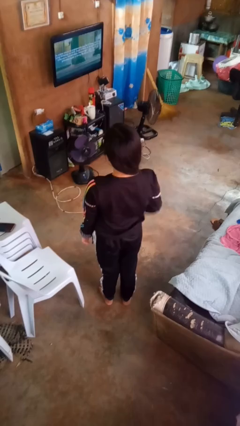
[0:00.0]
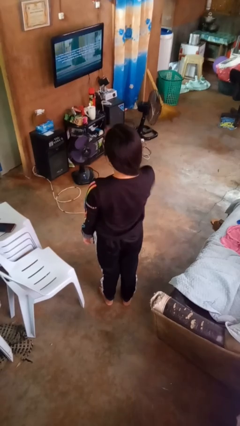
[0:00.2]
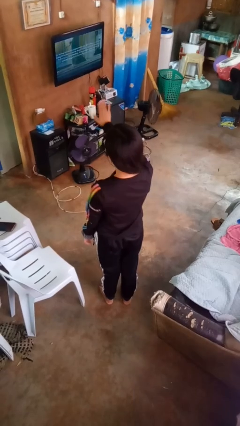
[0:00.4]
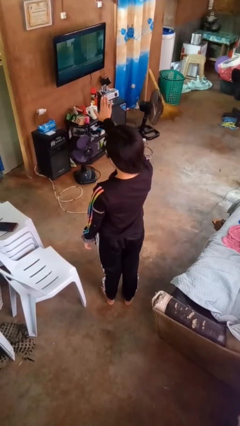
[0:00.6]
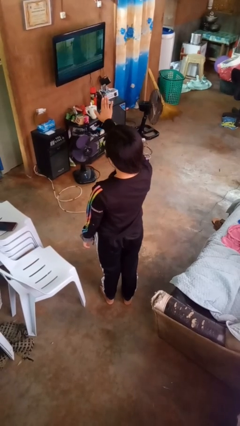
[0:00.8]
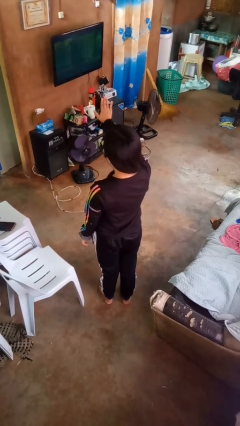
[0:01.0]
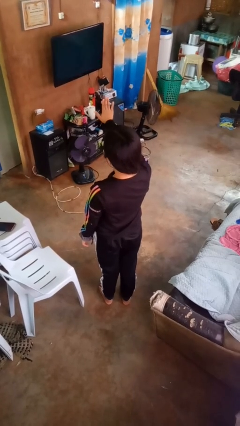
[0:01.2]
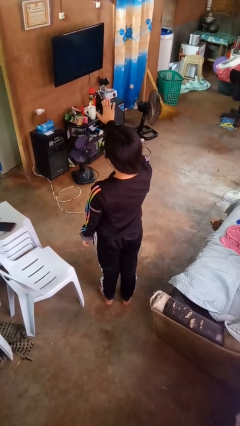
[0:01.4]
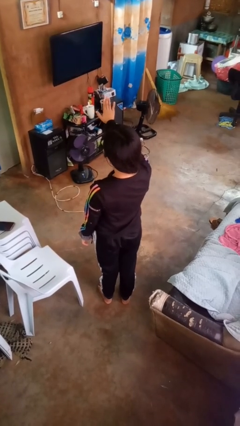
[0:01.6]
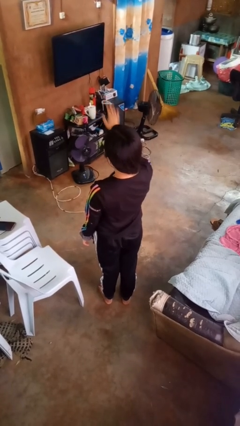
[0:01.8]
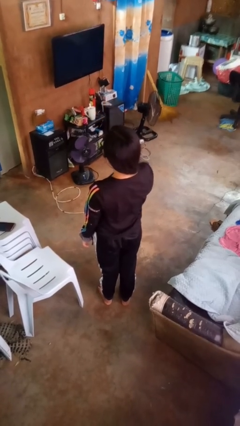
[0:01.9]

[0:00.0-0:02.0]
person gestures stop

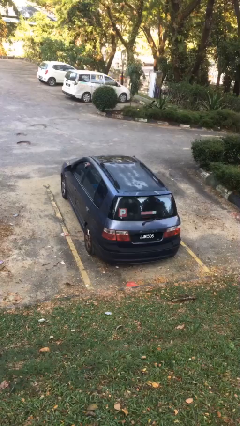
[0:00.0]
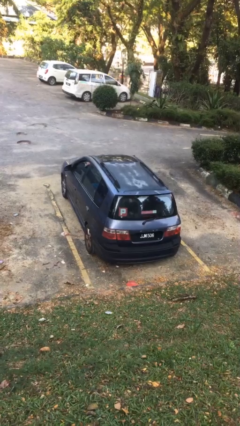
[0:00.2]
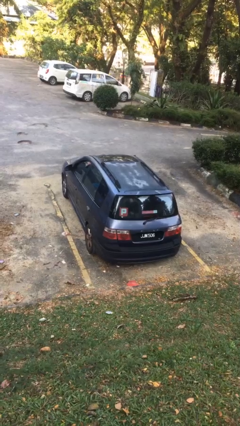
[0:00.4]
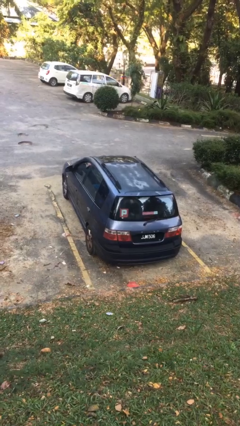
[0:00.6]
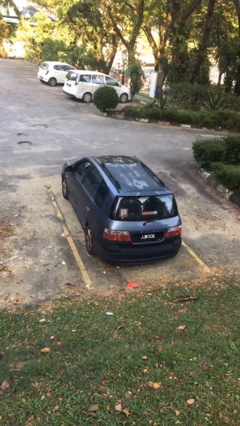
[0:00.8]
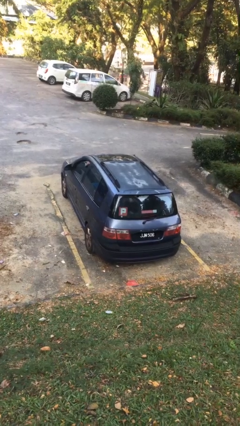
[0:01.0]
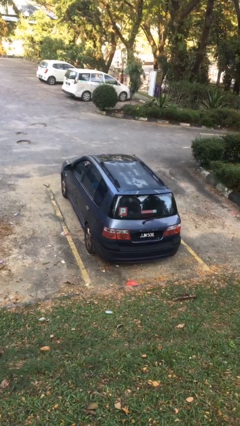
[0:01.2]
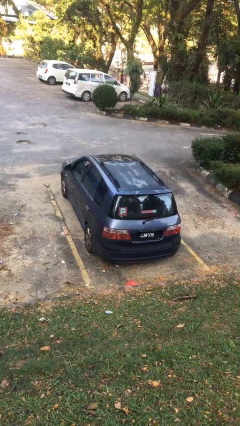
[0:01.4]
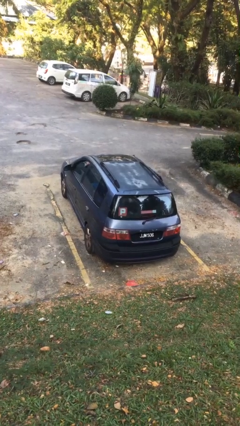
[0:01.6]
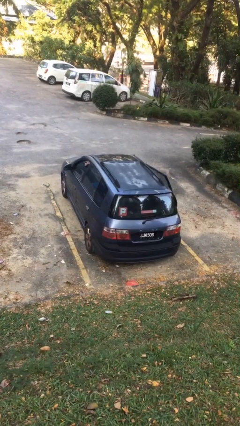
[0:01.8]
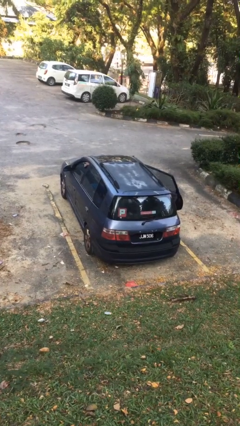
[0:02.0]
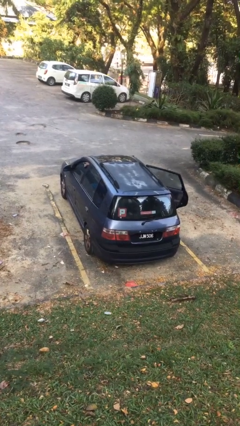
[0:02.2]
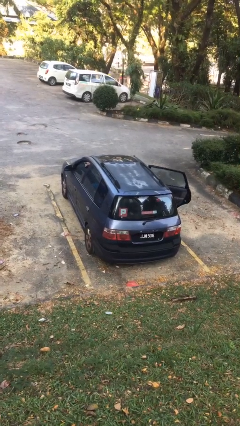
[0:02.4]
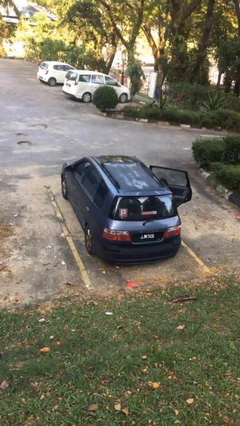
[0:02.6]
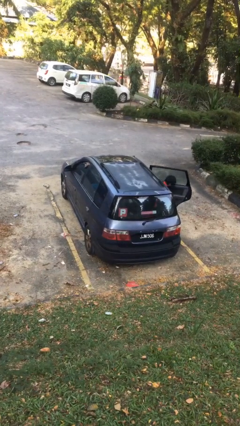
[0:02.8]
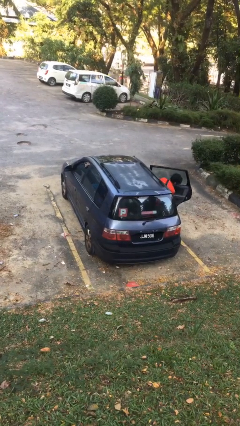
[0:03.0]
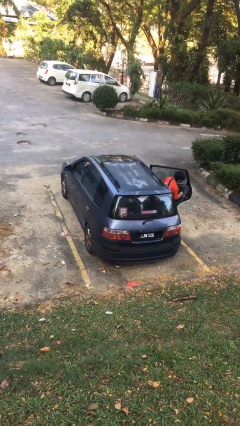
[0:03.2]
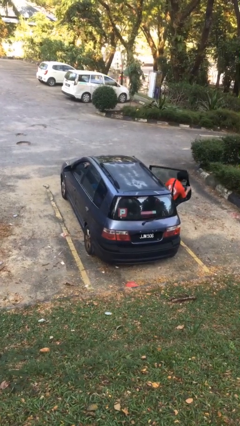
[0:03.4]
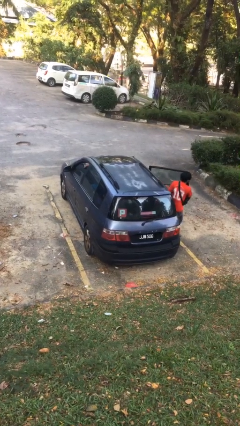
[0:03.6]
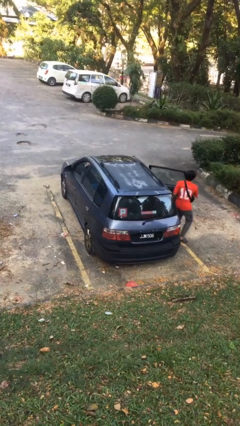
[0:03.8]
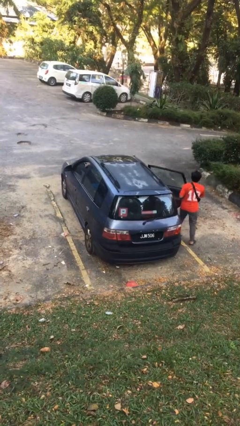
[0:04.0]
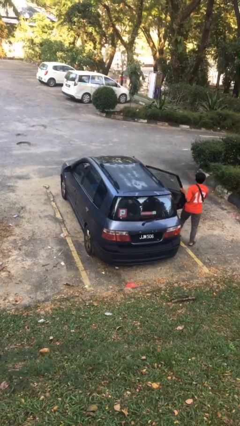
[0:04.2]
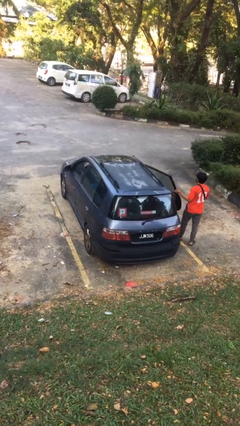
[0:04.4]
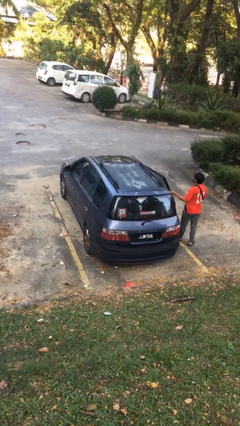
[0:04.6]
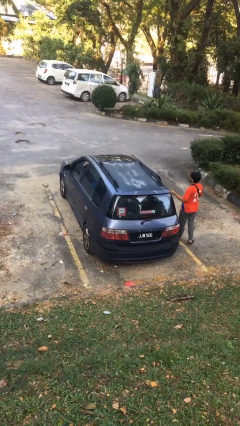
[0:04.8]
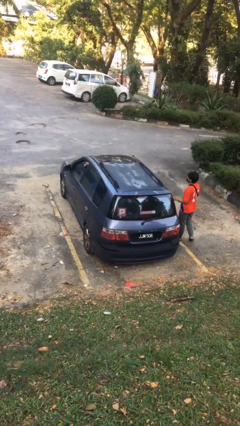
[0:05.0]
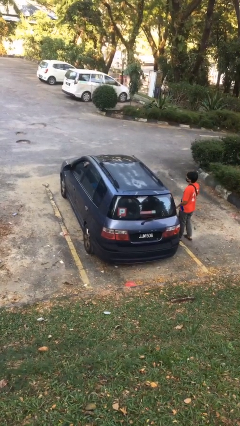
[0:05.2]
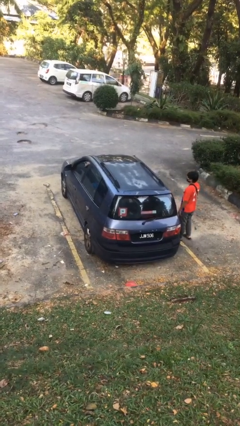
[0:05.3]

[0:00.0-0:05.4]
car drops off person

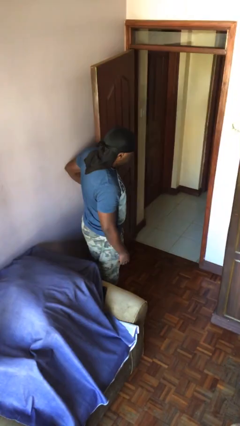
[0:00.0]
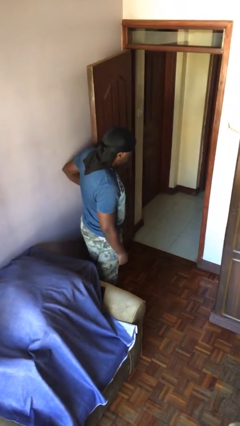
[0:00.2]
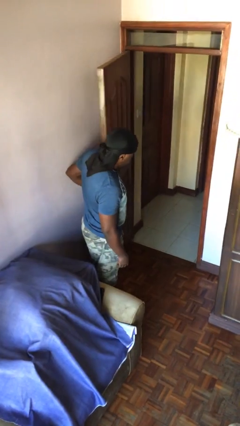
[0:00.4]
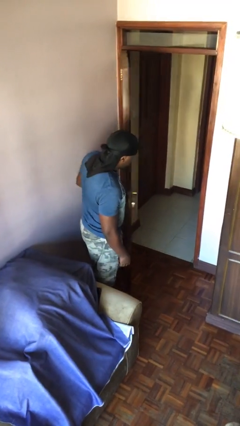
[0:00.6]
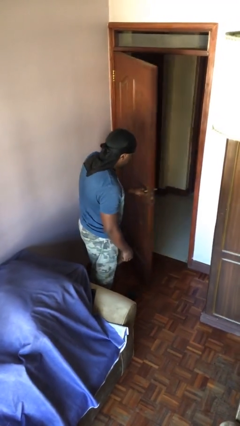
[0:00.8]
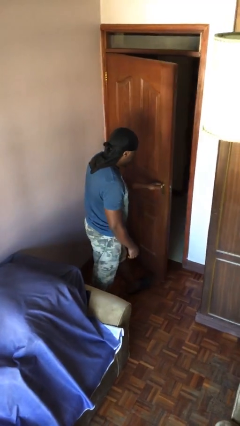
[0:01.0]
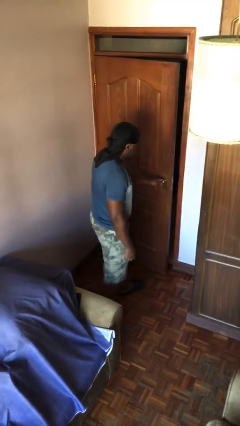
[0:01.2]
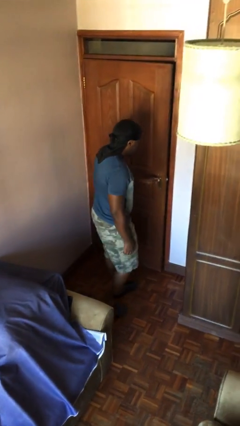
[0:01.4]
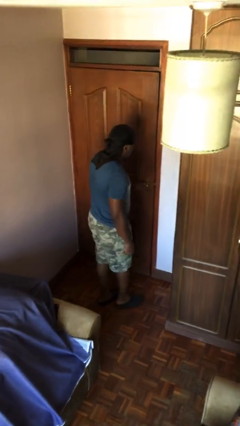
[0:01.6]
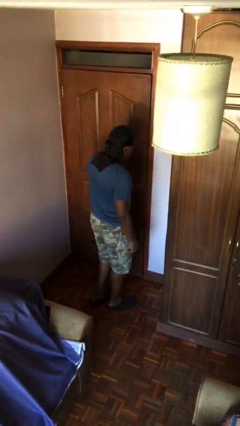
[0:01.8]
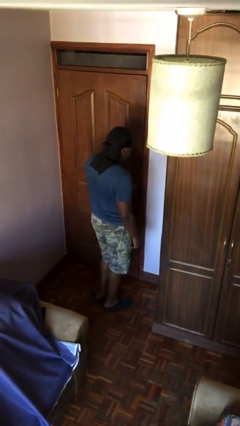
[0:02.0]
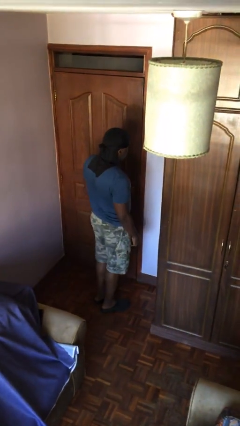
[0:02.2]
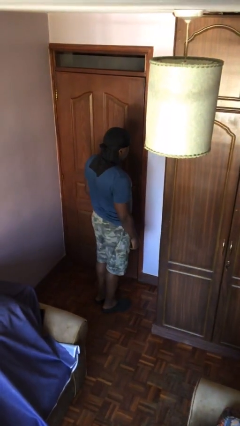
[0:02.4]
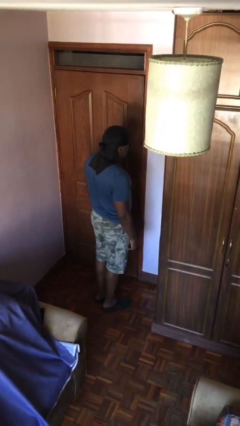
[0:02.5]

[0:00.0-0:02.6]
person closes facility door

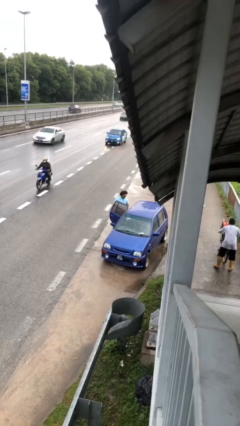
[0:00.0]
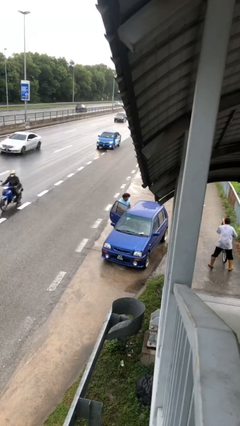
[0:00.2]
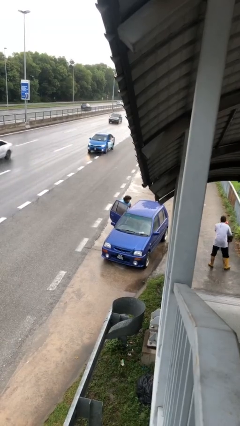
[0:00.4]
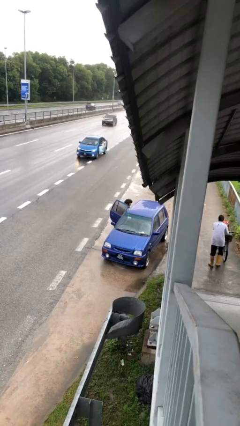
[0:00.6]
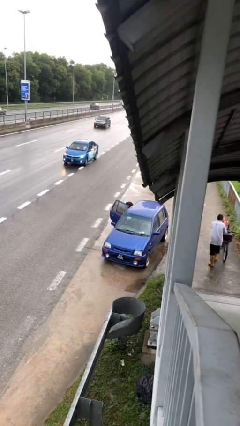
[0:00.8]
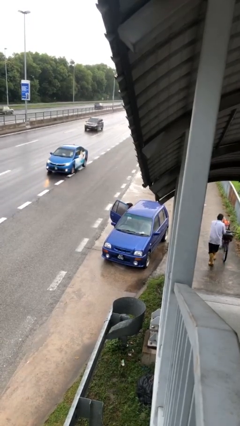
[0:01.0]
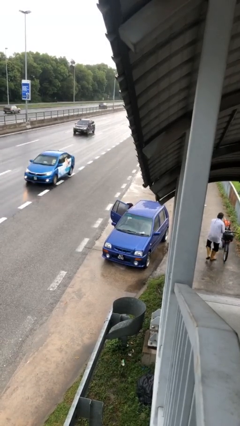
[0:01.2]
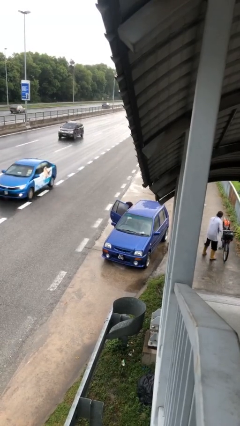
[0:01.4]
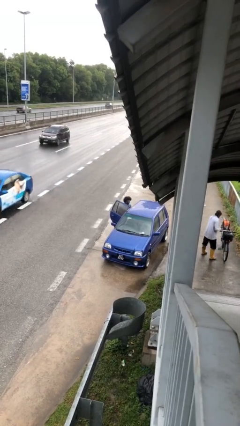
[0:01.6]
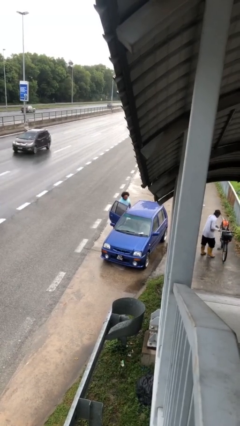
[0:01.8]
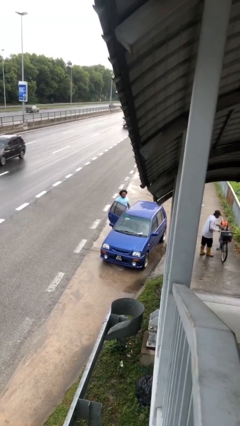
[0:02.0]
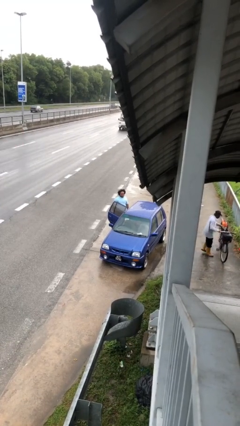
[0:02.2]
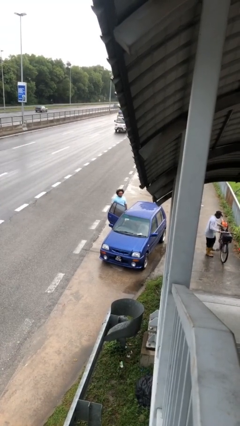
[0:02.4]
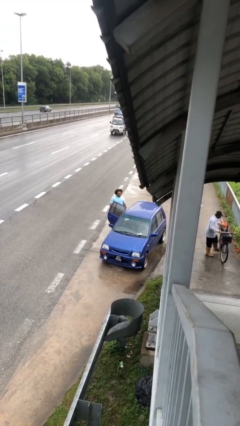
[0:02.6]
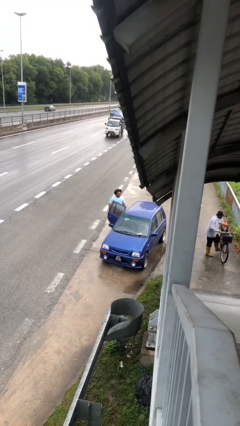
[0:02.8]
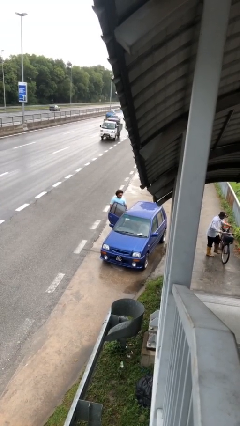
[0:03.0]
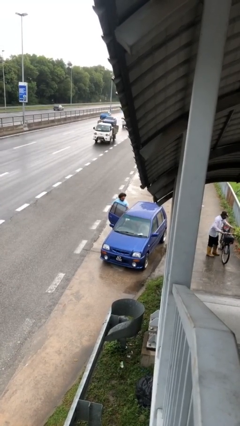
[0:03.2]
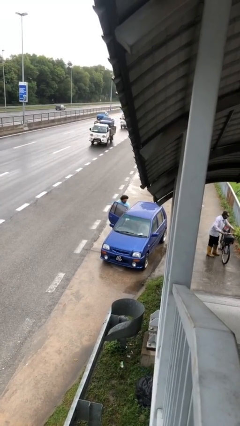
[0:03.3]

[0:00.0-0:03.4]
person loads car

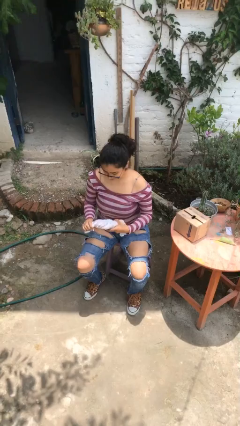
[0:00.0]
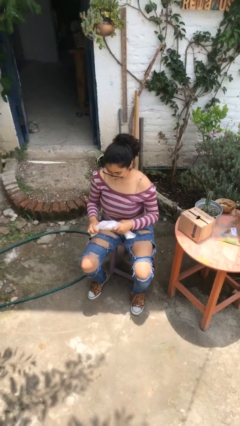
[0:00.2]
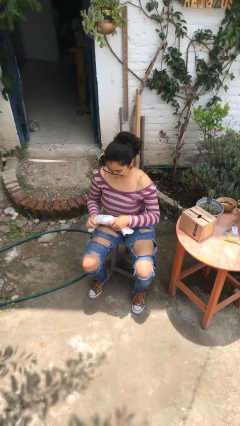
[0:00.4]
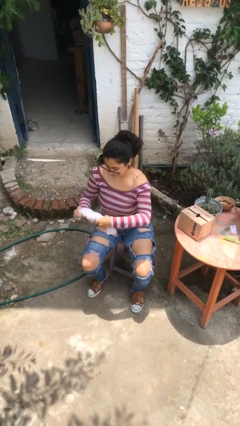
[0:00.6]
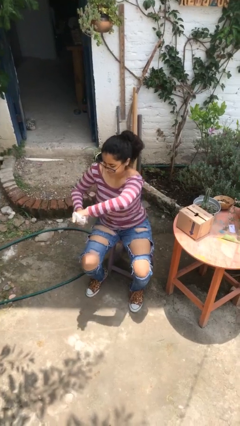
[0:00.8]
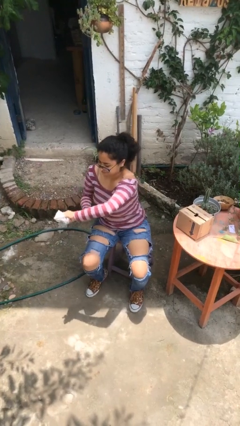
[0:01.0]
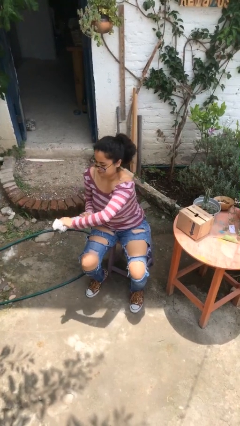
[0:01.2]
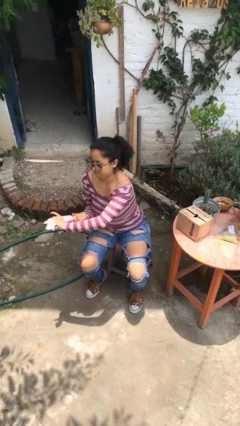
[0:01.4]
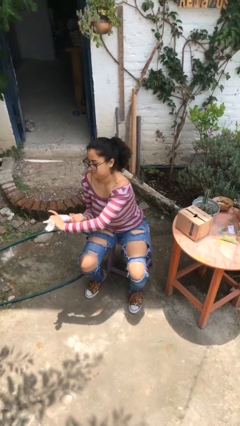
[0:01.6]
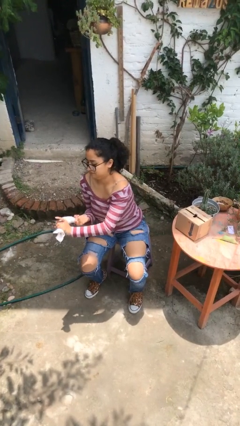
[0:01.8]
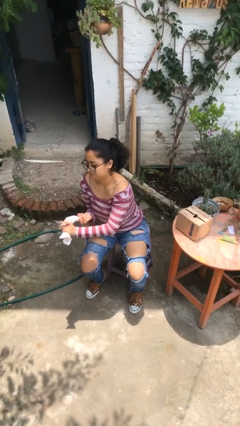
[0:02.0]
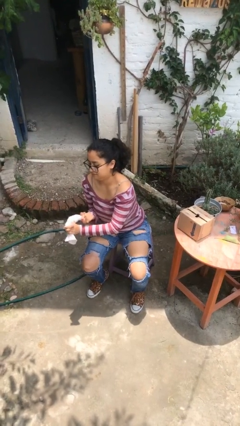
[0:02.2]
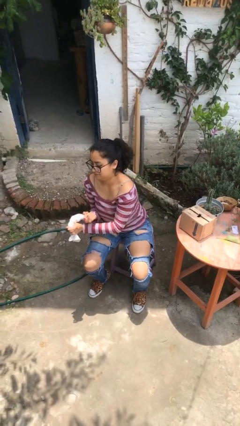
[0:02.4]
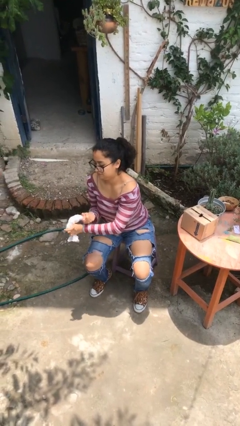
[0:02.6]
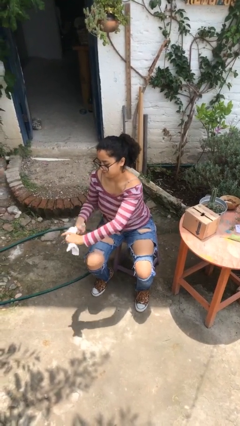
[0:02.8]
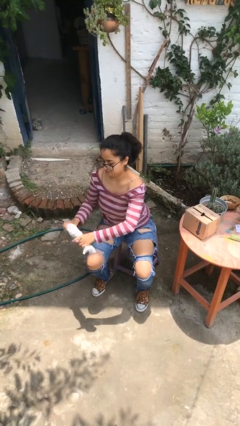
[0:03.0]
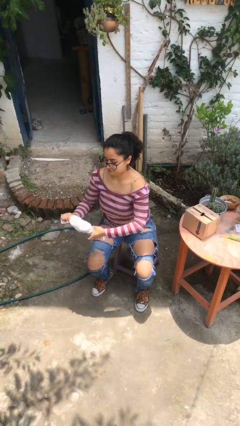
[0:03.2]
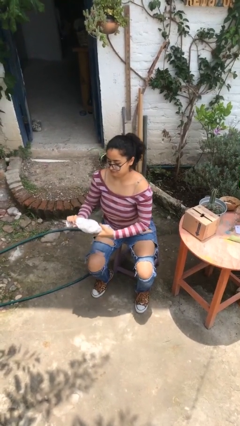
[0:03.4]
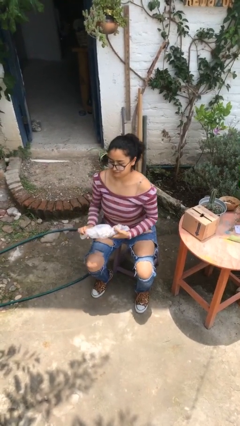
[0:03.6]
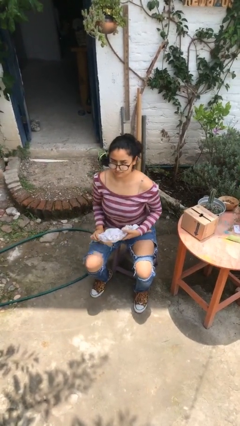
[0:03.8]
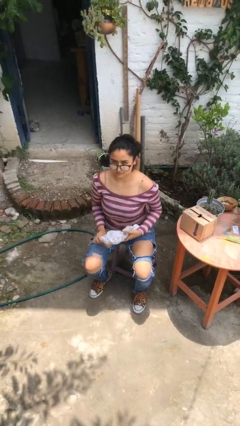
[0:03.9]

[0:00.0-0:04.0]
person squeezes object

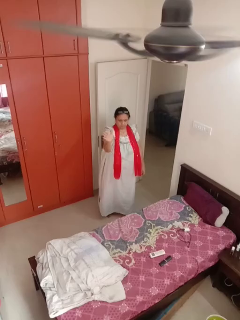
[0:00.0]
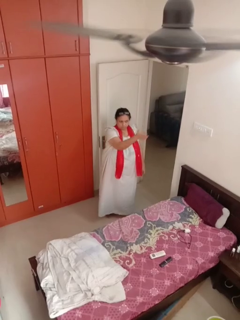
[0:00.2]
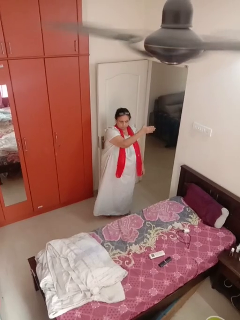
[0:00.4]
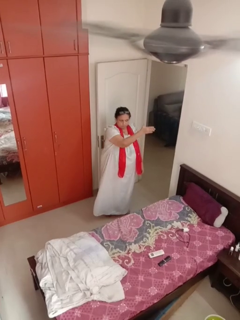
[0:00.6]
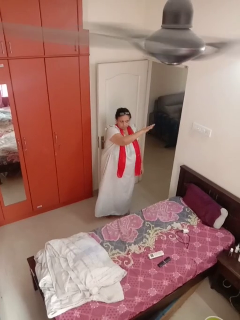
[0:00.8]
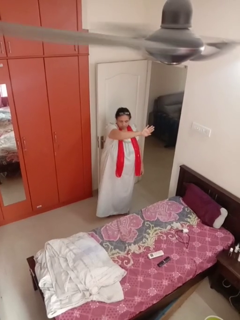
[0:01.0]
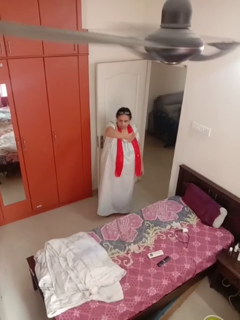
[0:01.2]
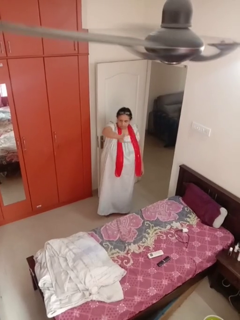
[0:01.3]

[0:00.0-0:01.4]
person gestures swipe left
